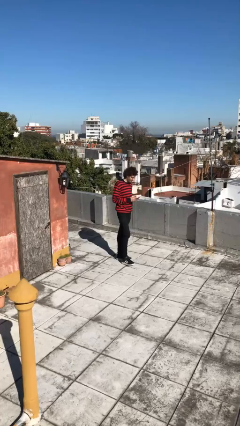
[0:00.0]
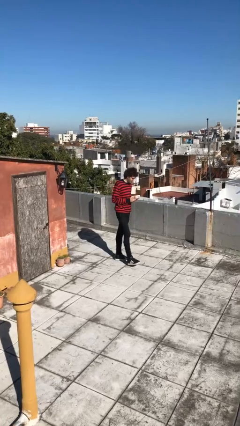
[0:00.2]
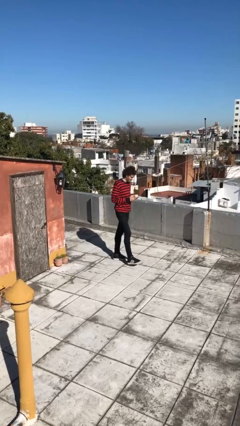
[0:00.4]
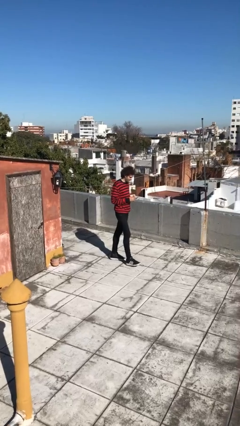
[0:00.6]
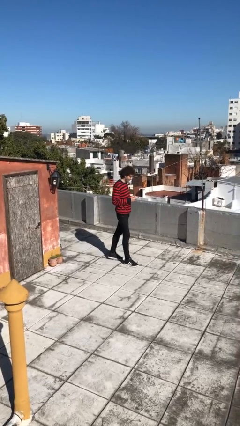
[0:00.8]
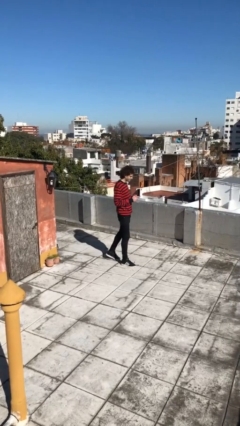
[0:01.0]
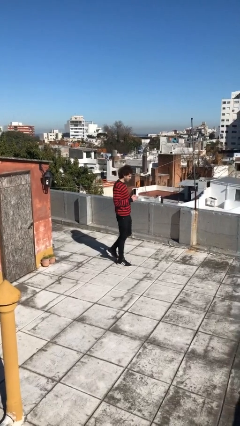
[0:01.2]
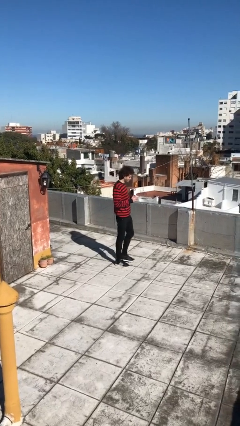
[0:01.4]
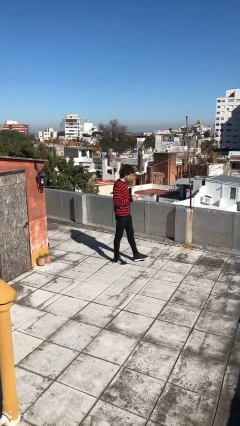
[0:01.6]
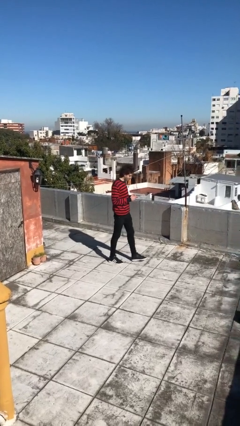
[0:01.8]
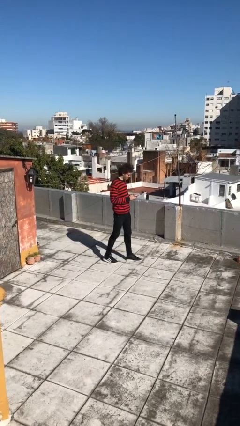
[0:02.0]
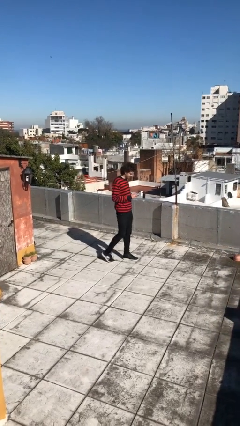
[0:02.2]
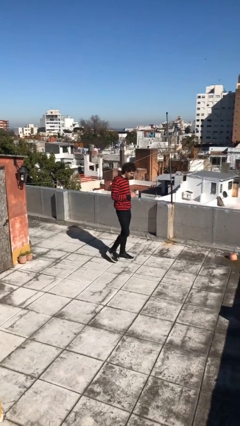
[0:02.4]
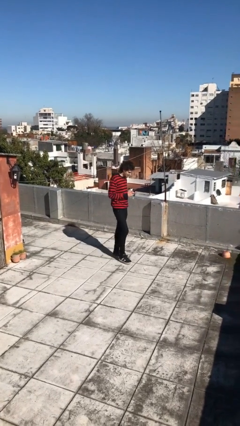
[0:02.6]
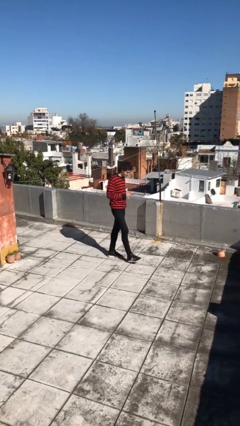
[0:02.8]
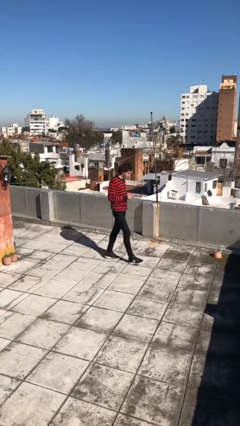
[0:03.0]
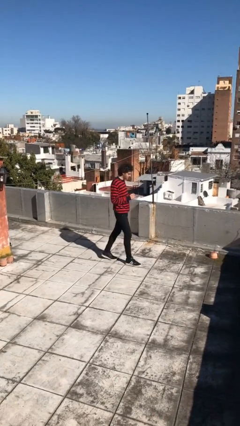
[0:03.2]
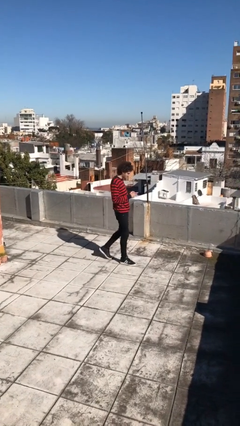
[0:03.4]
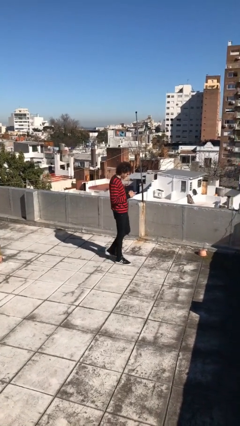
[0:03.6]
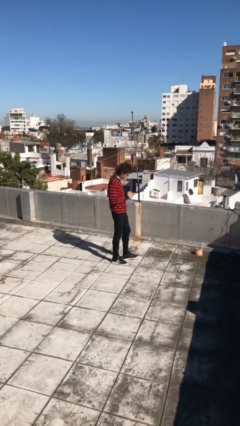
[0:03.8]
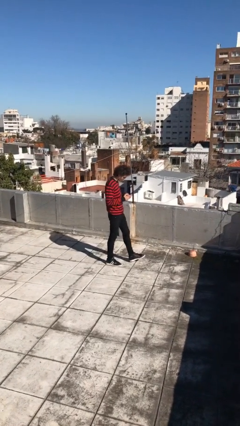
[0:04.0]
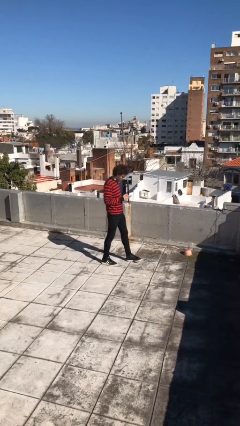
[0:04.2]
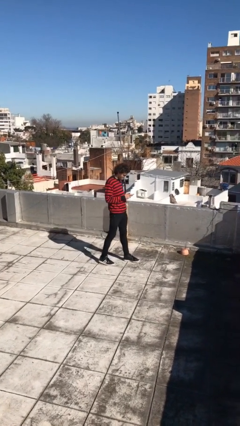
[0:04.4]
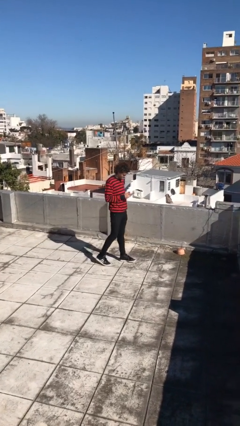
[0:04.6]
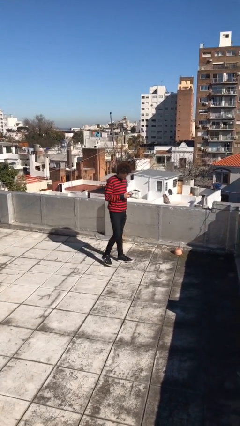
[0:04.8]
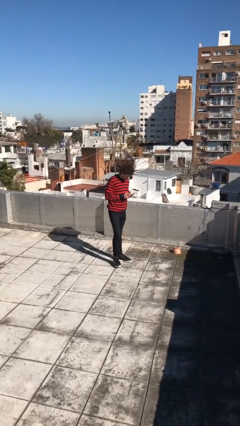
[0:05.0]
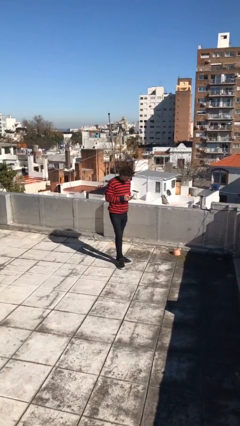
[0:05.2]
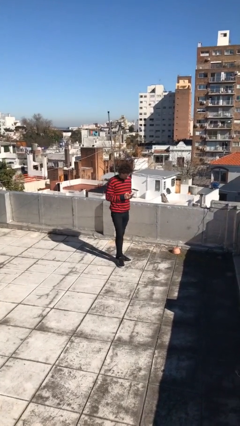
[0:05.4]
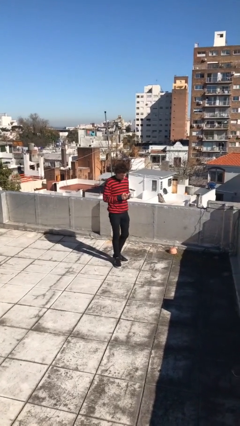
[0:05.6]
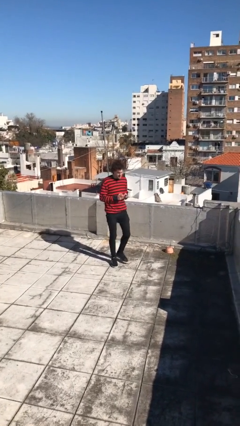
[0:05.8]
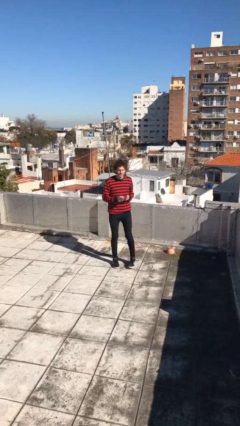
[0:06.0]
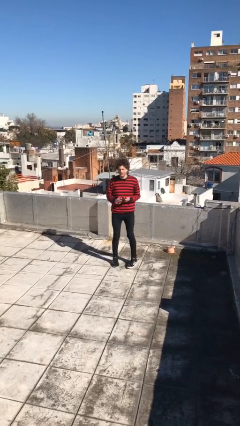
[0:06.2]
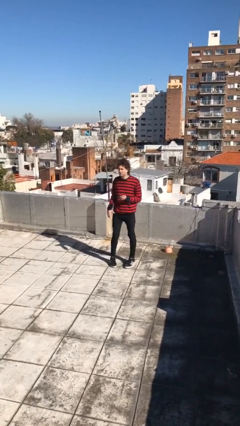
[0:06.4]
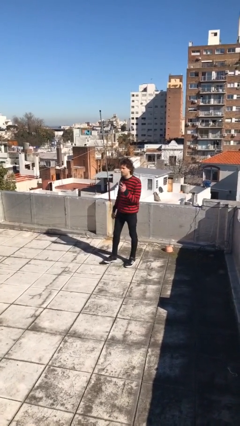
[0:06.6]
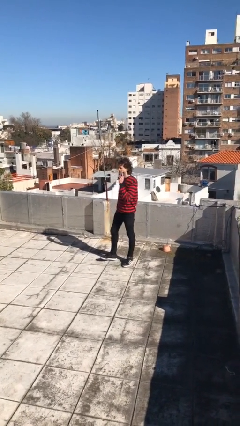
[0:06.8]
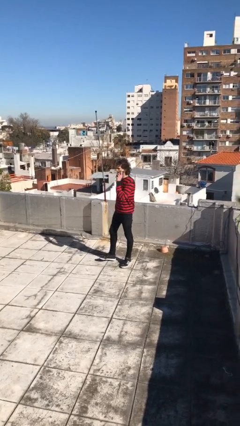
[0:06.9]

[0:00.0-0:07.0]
person texts on phone

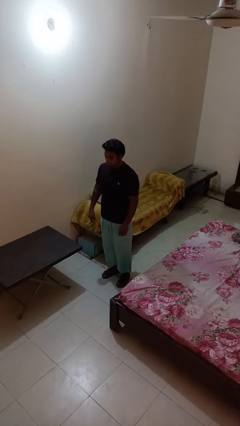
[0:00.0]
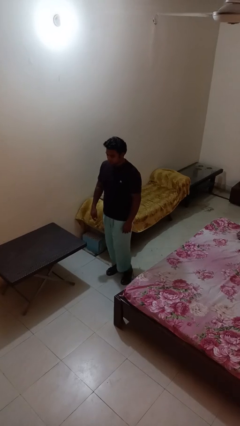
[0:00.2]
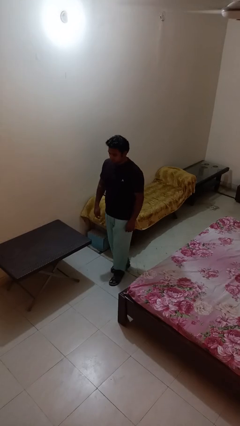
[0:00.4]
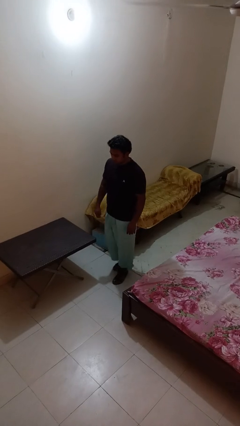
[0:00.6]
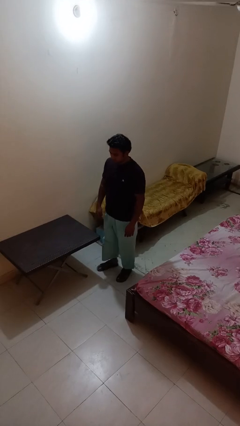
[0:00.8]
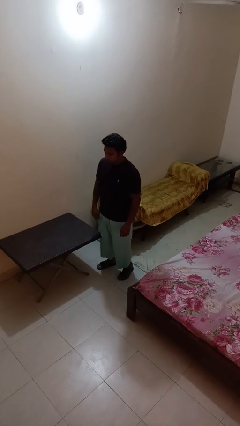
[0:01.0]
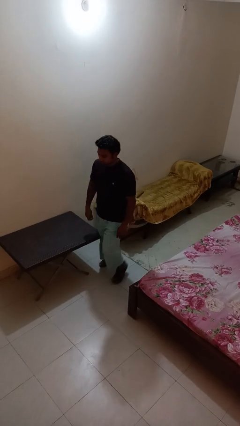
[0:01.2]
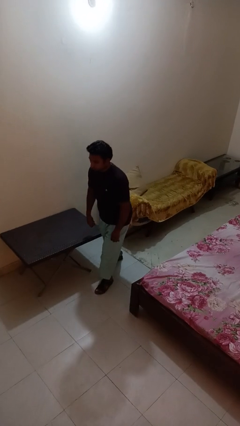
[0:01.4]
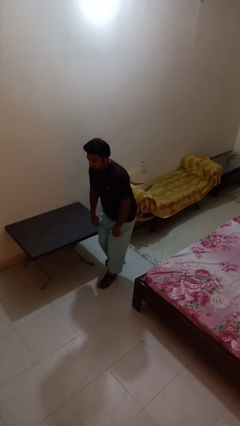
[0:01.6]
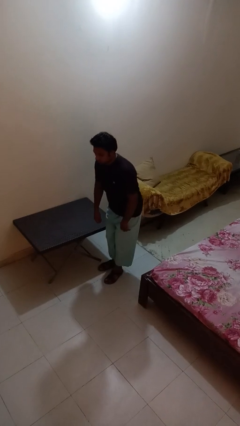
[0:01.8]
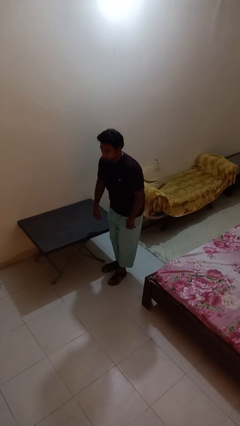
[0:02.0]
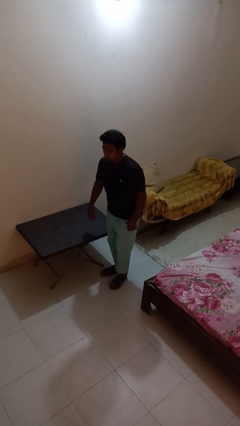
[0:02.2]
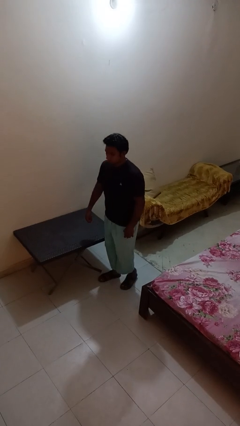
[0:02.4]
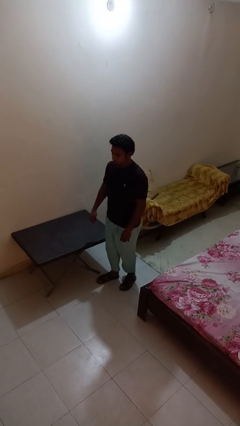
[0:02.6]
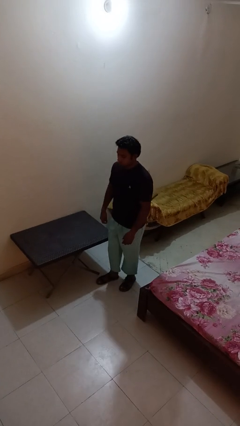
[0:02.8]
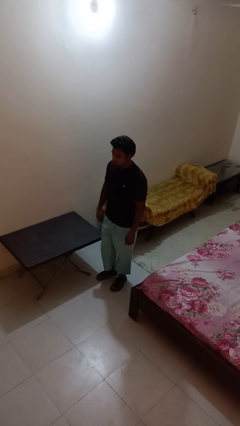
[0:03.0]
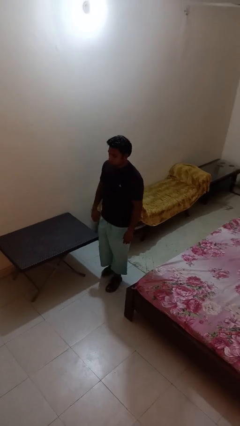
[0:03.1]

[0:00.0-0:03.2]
person bumps into table

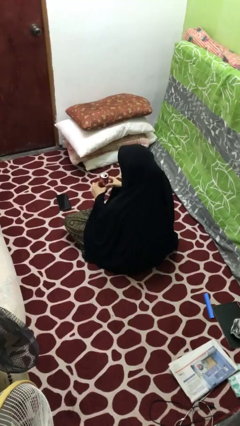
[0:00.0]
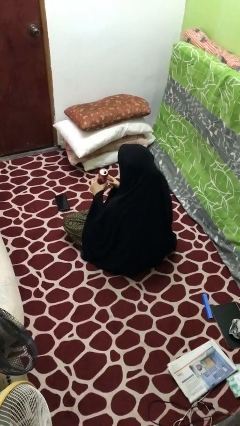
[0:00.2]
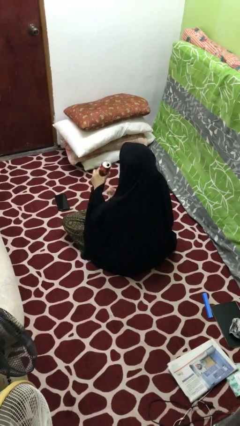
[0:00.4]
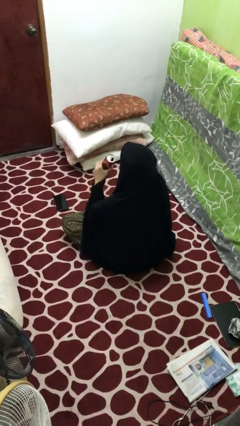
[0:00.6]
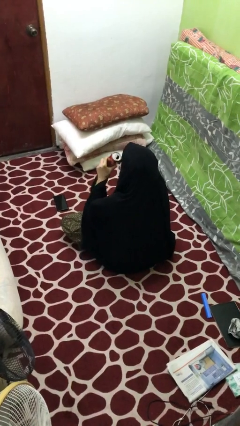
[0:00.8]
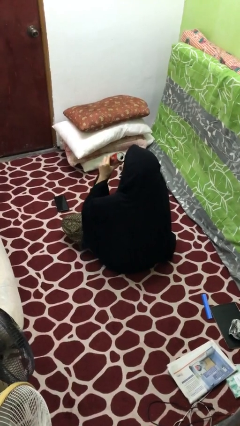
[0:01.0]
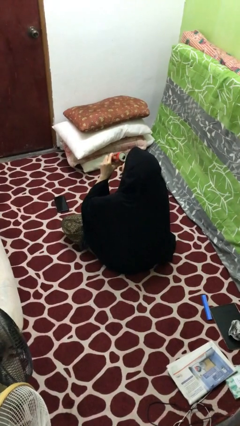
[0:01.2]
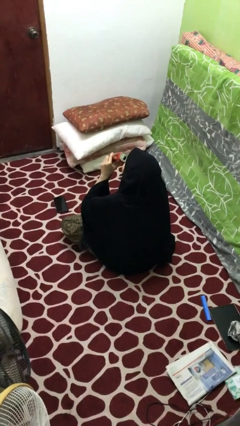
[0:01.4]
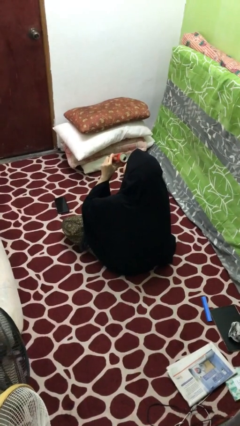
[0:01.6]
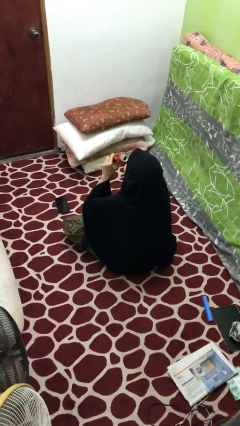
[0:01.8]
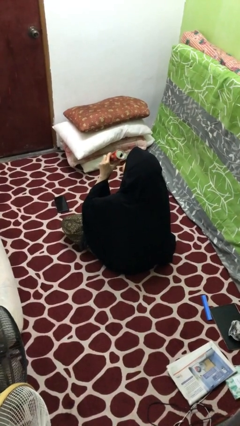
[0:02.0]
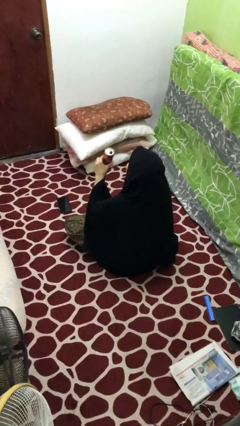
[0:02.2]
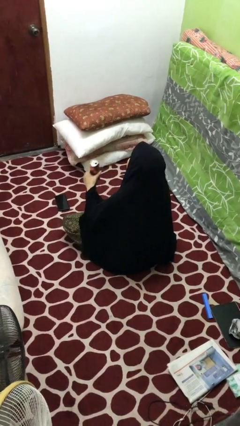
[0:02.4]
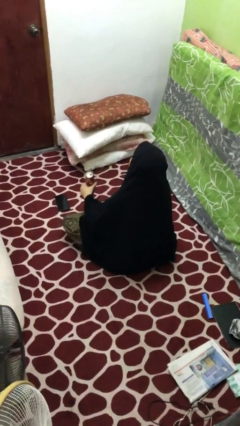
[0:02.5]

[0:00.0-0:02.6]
person drinks from beverage can

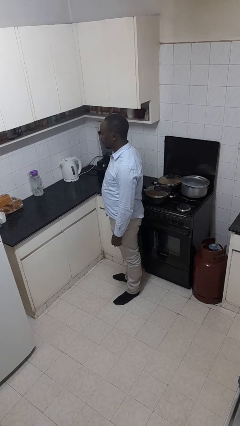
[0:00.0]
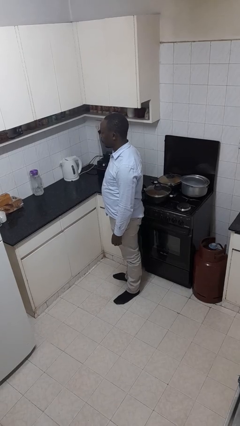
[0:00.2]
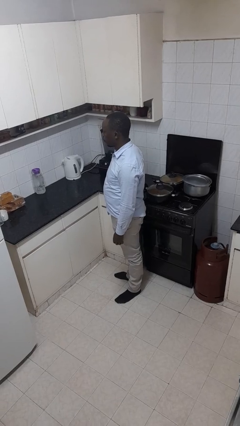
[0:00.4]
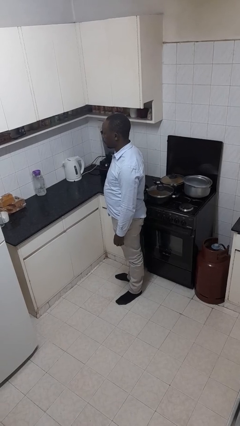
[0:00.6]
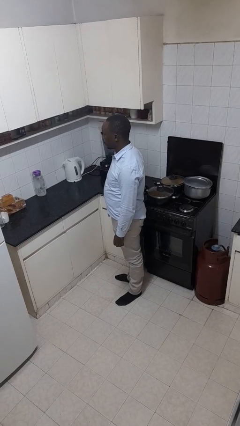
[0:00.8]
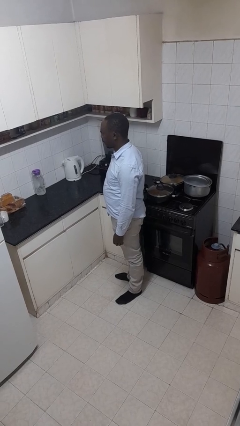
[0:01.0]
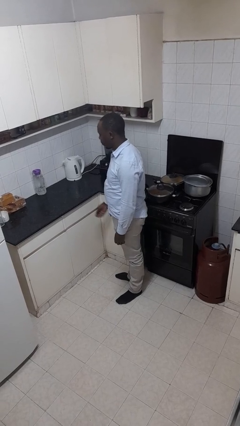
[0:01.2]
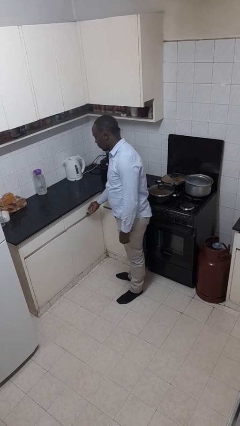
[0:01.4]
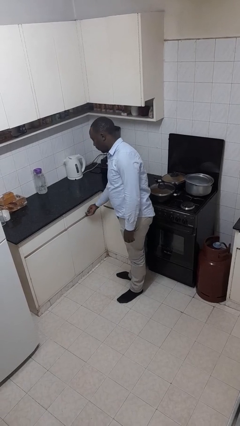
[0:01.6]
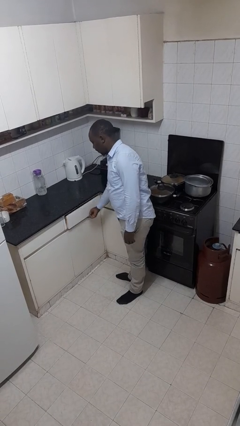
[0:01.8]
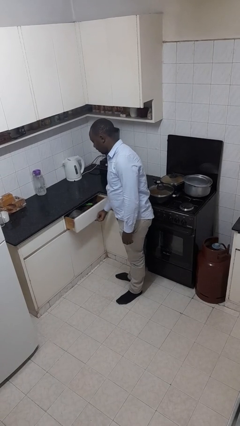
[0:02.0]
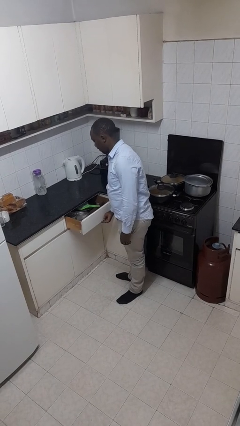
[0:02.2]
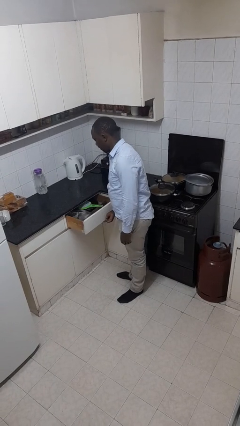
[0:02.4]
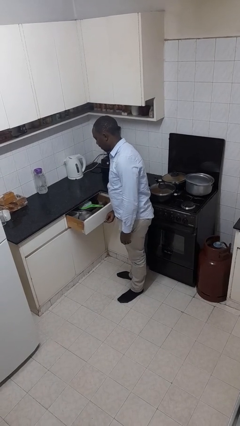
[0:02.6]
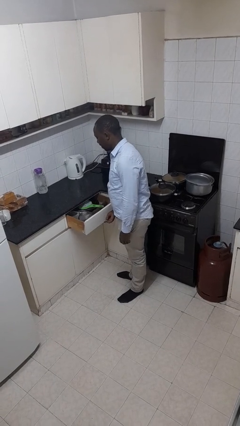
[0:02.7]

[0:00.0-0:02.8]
person opens kitchen drawer

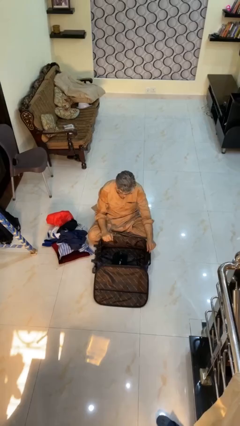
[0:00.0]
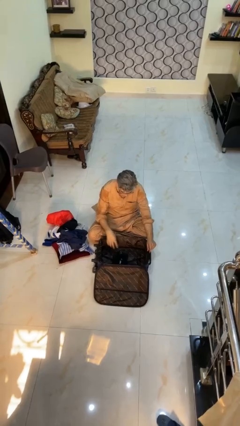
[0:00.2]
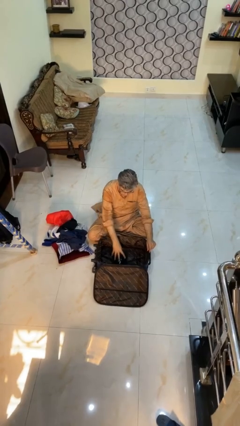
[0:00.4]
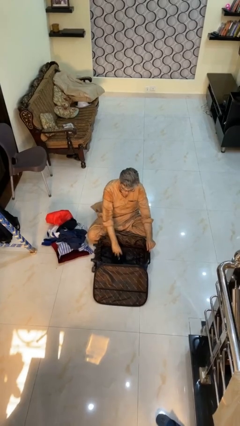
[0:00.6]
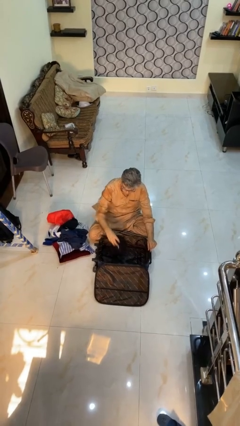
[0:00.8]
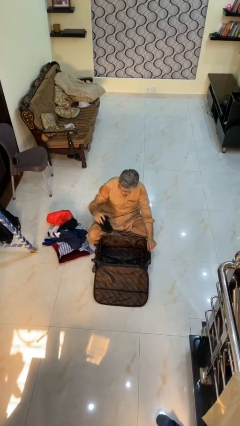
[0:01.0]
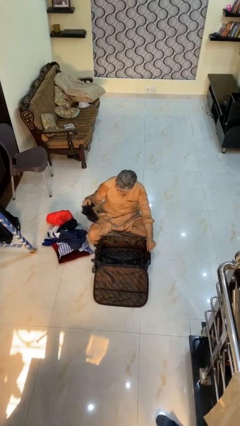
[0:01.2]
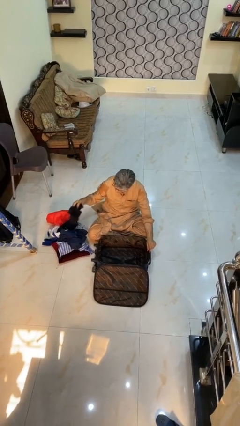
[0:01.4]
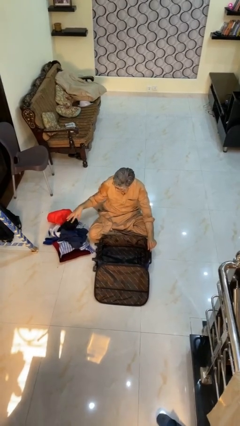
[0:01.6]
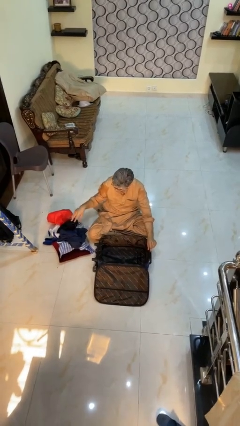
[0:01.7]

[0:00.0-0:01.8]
person unloads clothes from suitcase
